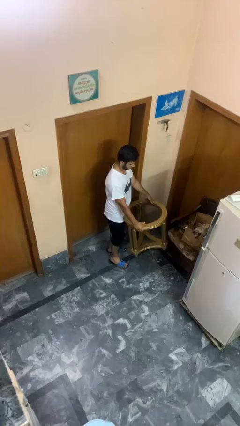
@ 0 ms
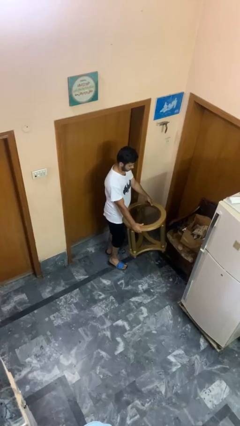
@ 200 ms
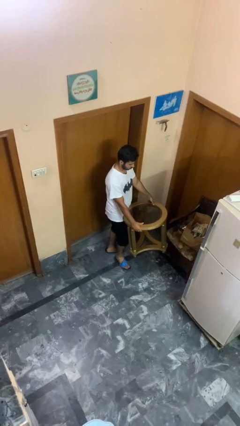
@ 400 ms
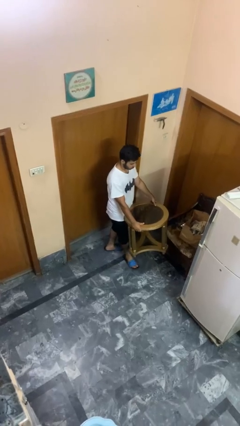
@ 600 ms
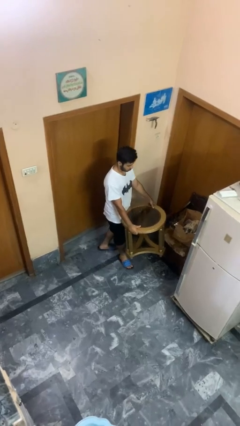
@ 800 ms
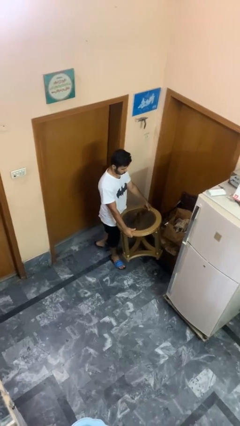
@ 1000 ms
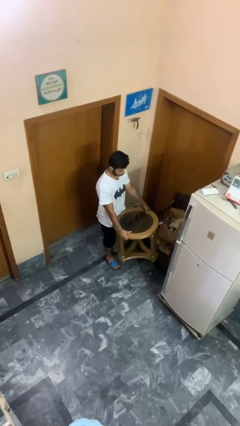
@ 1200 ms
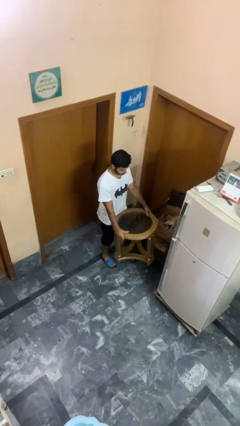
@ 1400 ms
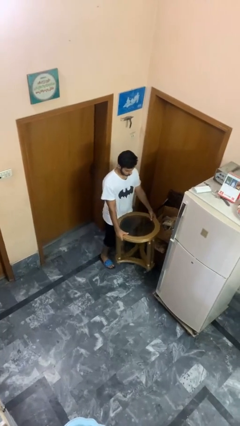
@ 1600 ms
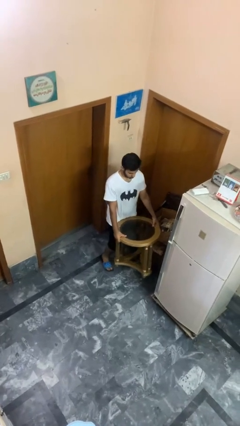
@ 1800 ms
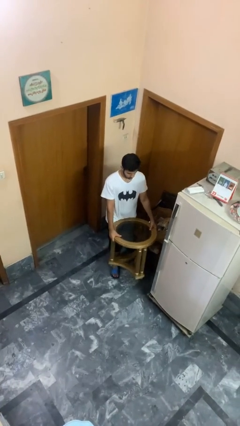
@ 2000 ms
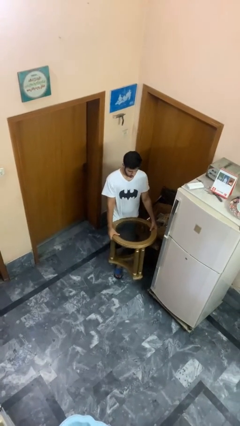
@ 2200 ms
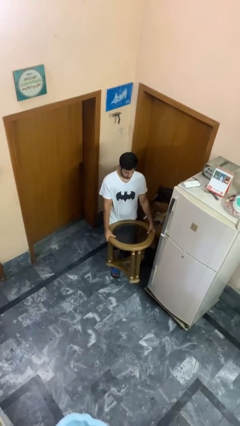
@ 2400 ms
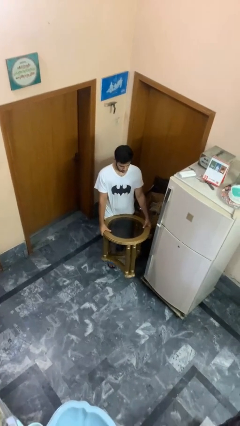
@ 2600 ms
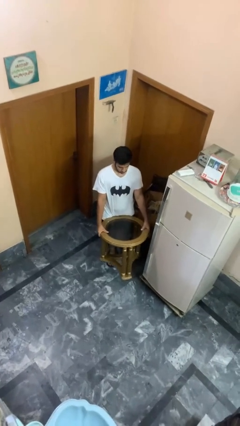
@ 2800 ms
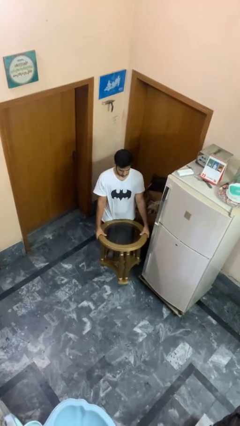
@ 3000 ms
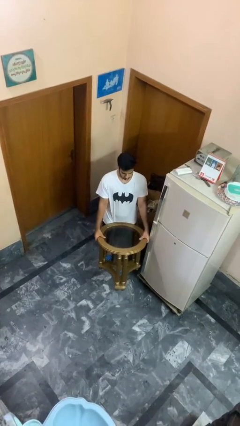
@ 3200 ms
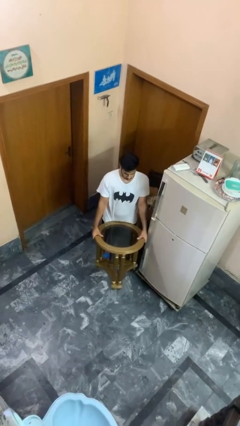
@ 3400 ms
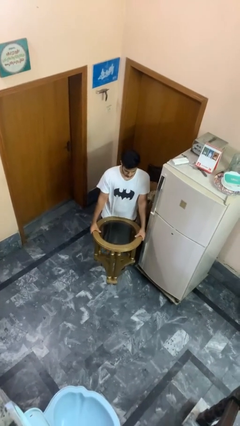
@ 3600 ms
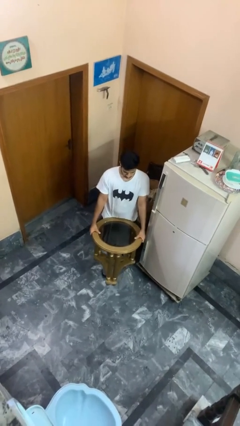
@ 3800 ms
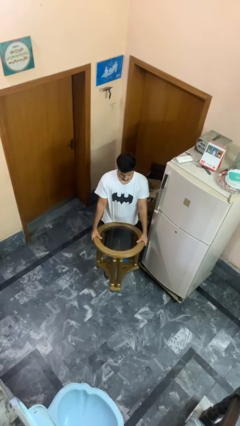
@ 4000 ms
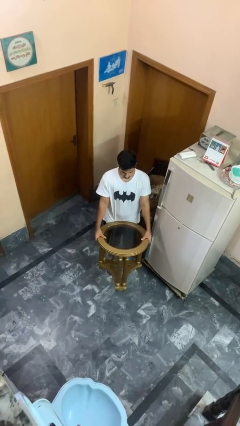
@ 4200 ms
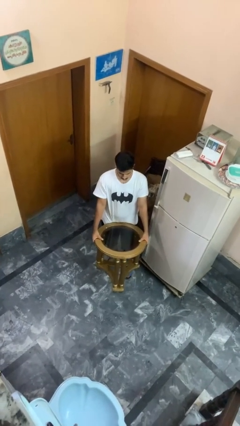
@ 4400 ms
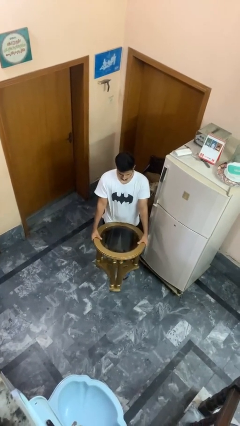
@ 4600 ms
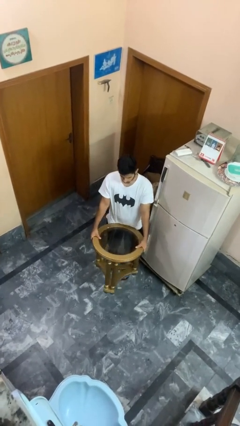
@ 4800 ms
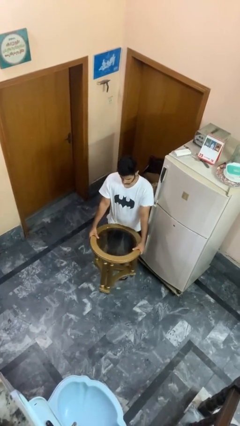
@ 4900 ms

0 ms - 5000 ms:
person carries furniture

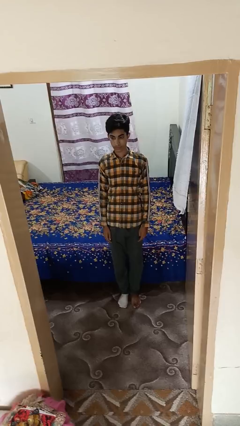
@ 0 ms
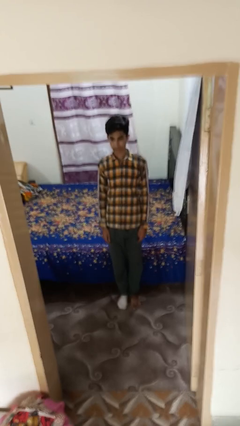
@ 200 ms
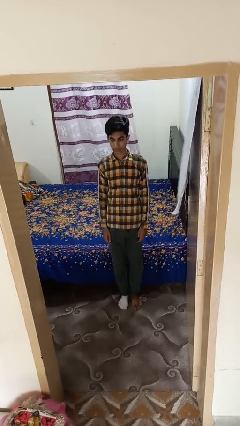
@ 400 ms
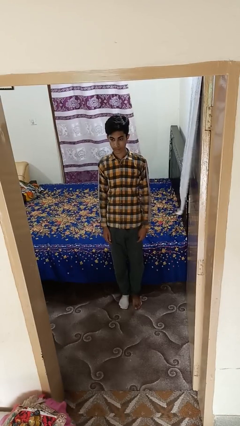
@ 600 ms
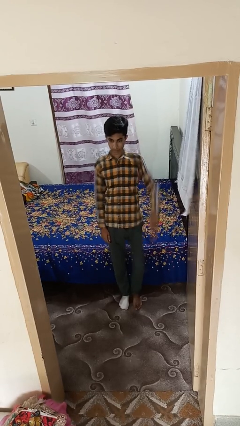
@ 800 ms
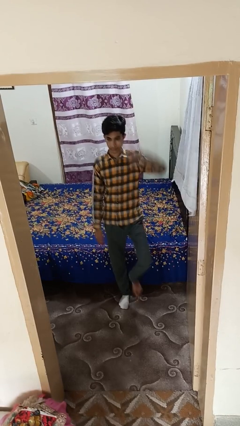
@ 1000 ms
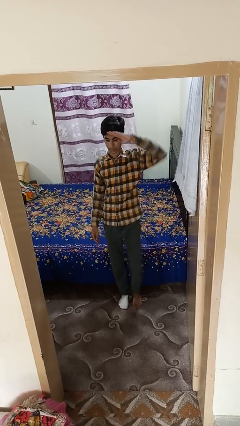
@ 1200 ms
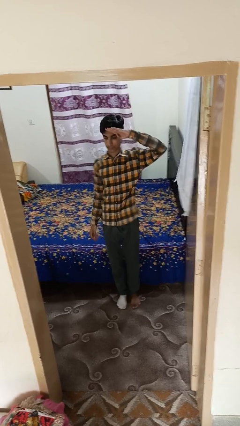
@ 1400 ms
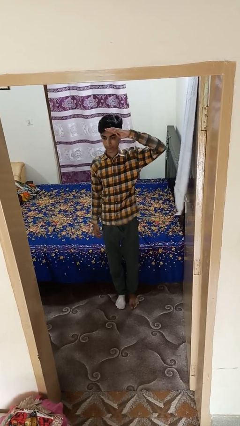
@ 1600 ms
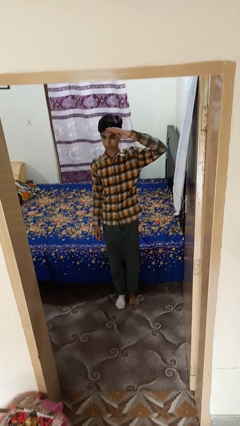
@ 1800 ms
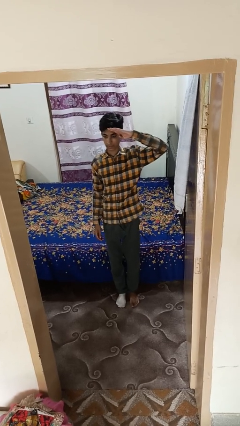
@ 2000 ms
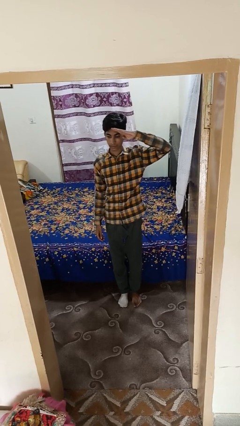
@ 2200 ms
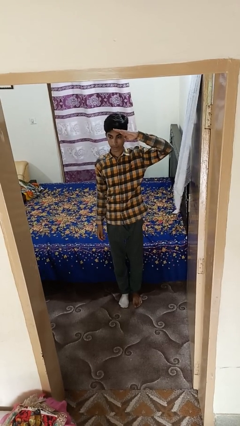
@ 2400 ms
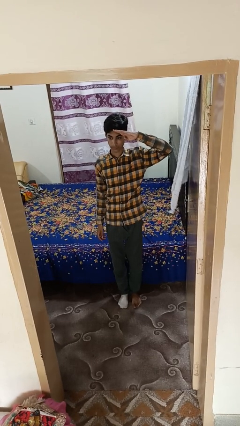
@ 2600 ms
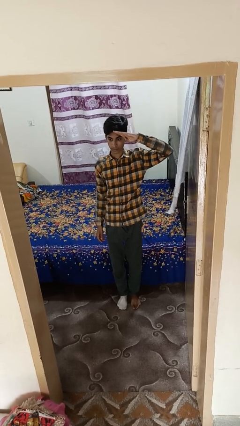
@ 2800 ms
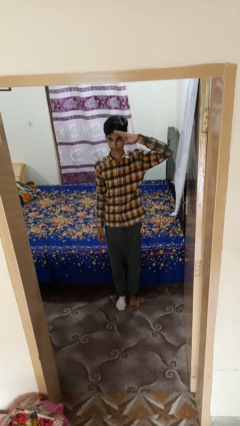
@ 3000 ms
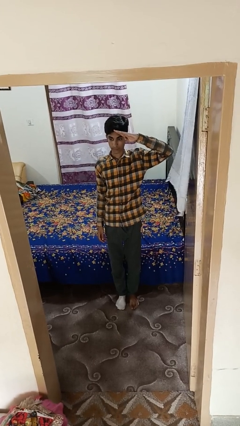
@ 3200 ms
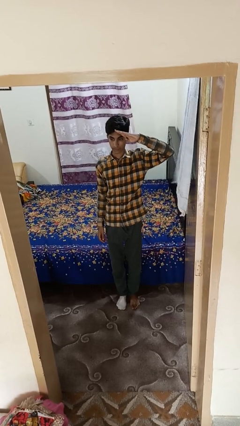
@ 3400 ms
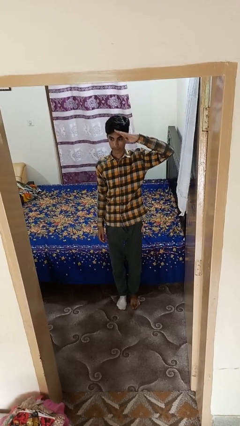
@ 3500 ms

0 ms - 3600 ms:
person salutes

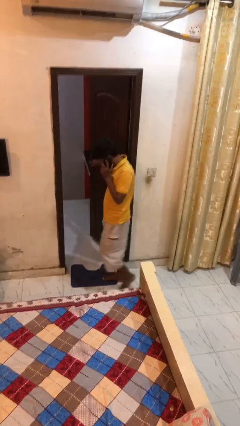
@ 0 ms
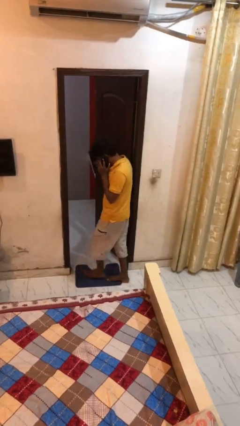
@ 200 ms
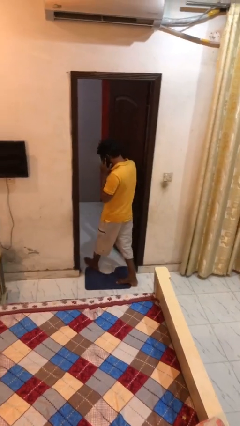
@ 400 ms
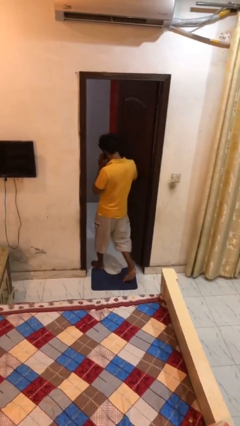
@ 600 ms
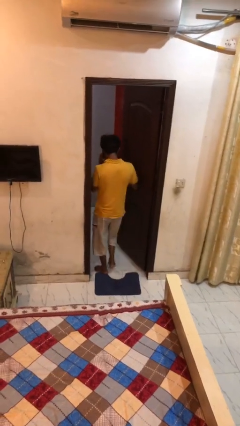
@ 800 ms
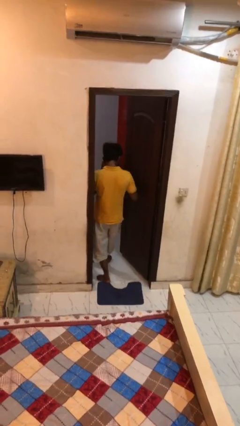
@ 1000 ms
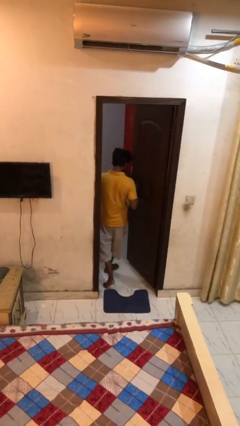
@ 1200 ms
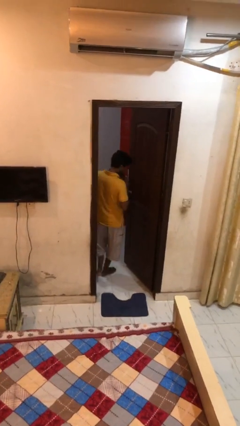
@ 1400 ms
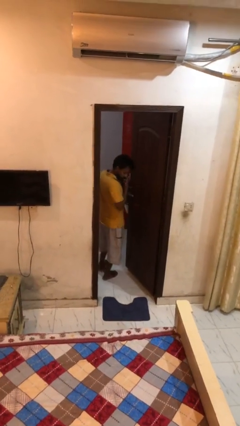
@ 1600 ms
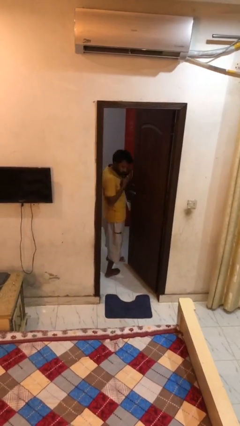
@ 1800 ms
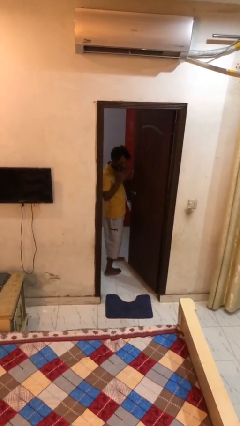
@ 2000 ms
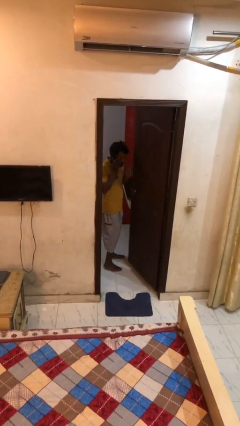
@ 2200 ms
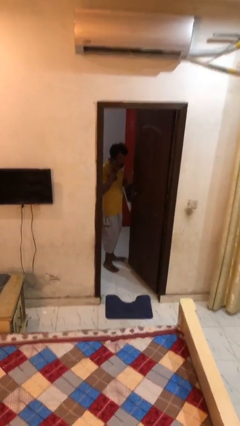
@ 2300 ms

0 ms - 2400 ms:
person exits scene through structure

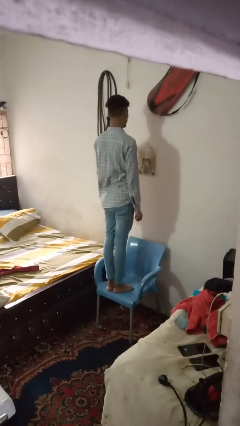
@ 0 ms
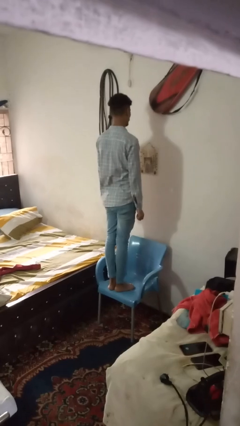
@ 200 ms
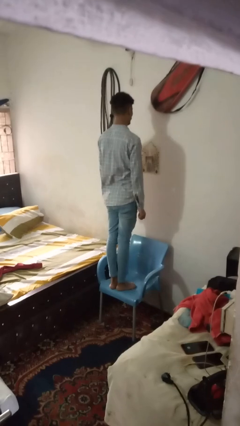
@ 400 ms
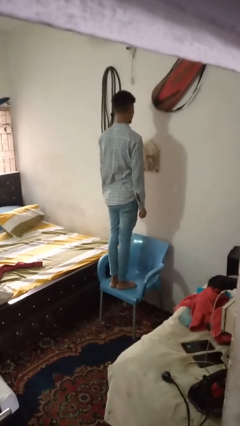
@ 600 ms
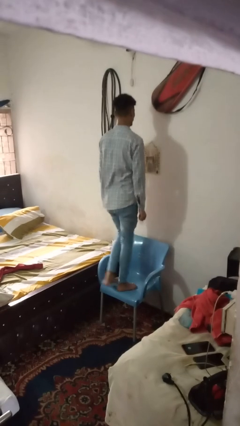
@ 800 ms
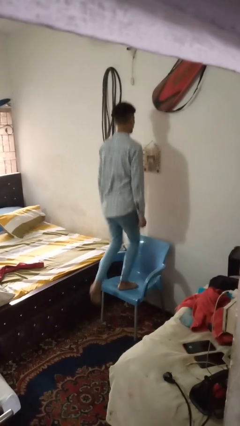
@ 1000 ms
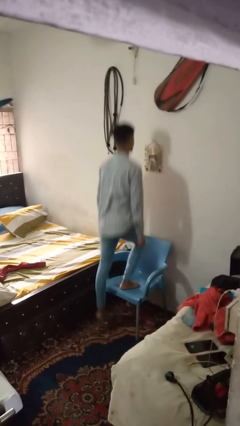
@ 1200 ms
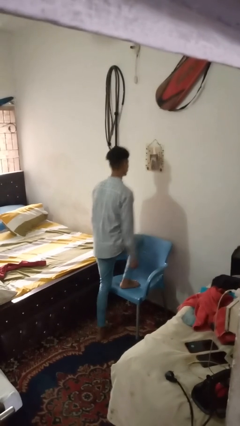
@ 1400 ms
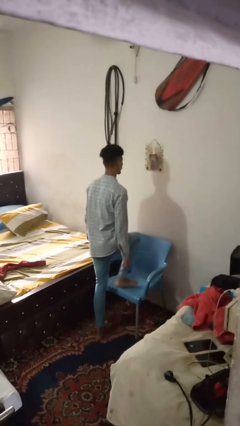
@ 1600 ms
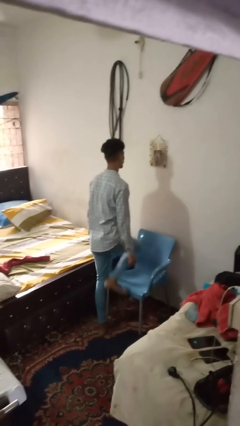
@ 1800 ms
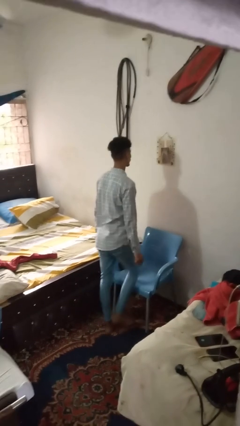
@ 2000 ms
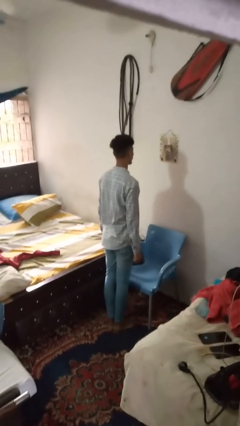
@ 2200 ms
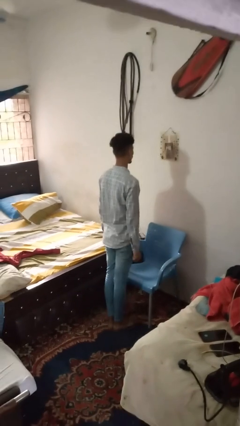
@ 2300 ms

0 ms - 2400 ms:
person climbs off chair

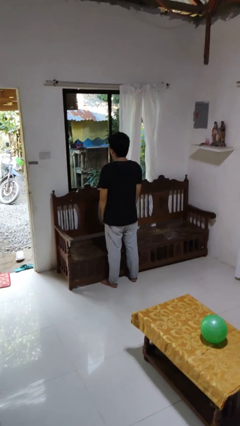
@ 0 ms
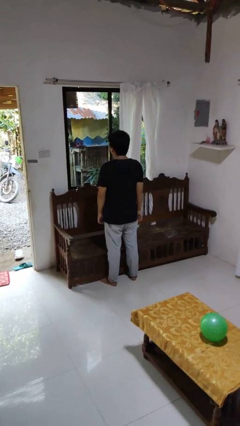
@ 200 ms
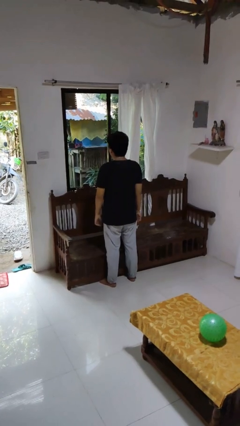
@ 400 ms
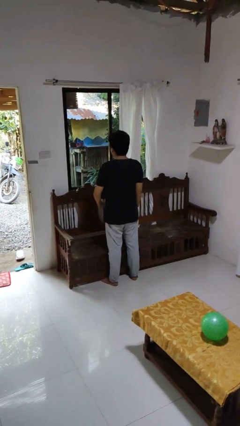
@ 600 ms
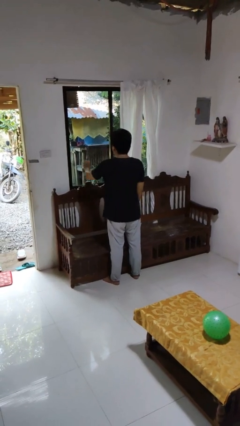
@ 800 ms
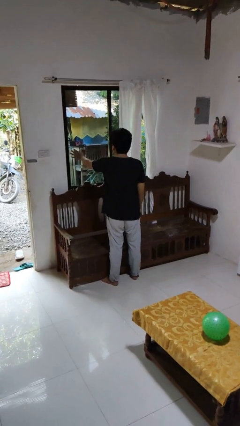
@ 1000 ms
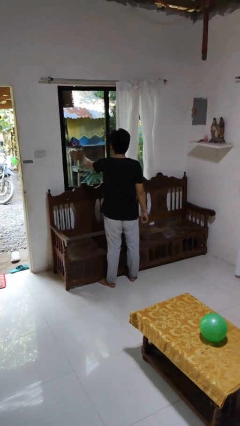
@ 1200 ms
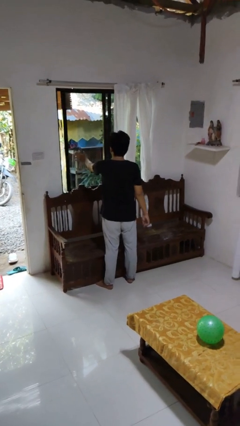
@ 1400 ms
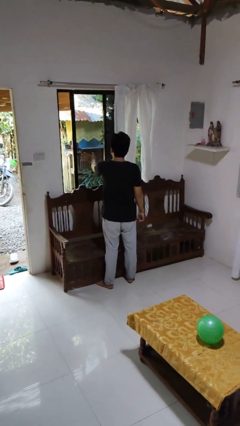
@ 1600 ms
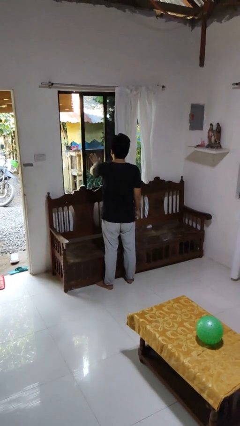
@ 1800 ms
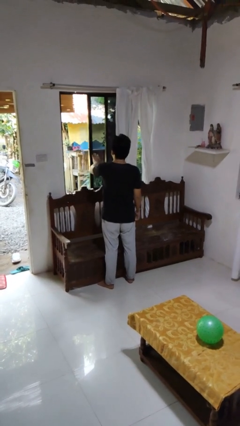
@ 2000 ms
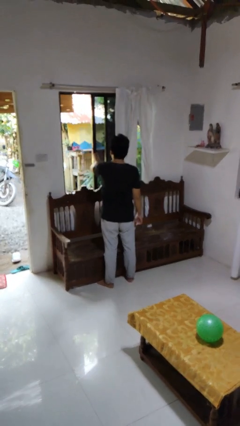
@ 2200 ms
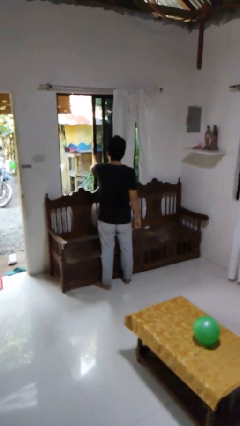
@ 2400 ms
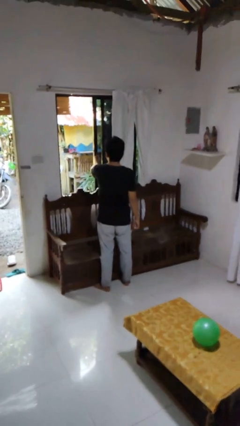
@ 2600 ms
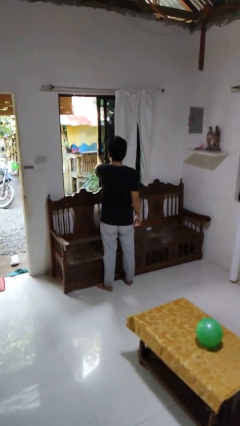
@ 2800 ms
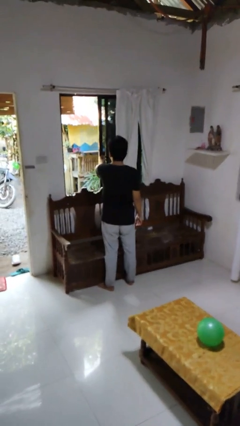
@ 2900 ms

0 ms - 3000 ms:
person opens home window

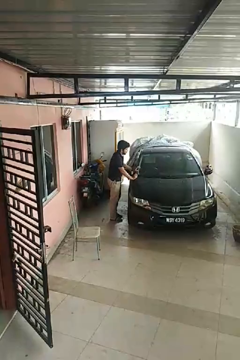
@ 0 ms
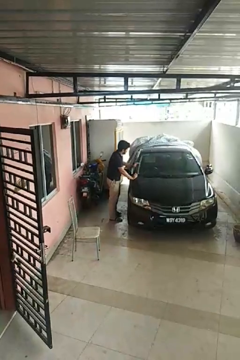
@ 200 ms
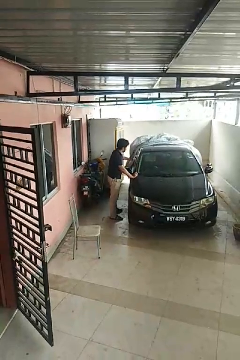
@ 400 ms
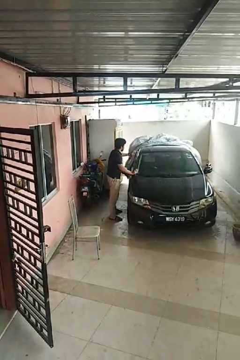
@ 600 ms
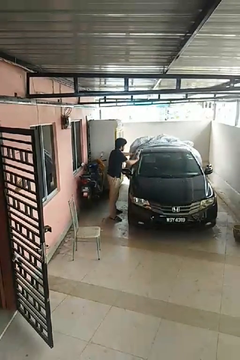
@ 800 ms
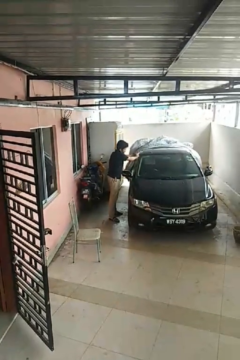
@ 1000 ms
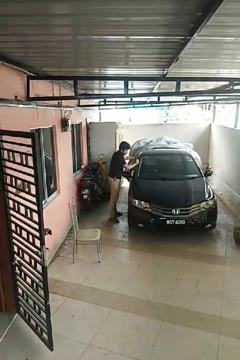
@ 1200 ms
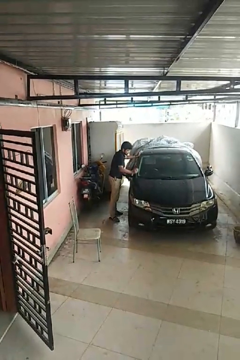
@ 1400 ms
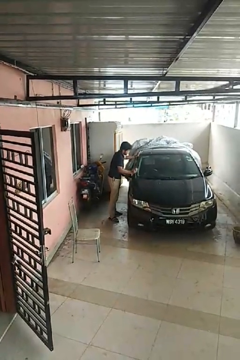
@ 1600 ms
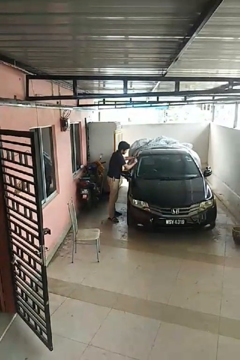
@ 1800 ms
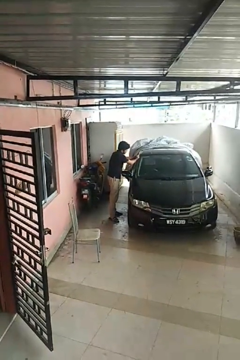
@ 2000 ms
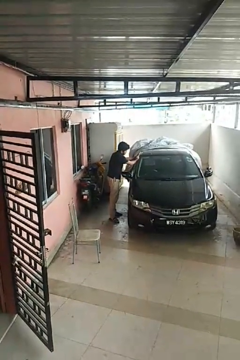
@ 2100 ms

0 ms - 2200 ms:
person polishes car with rag
